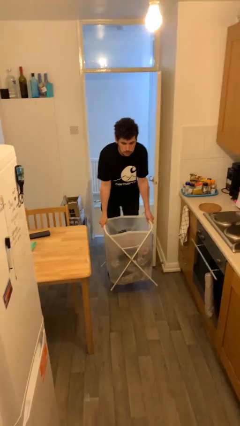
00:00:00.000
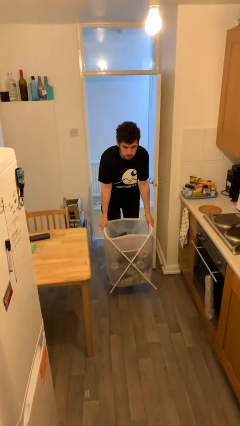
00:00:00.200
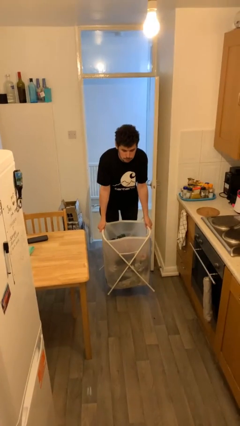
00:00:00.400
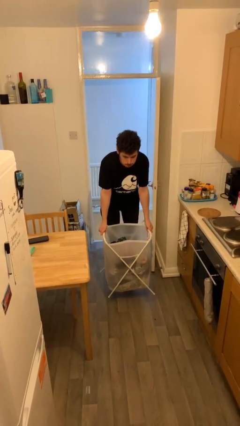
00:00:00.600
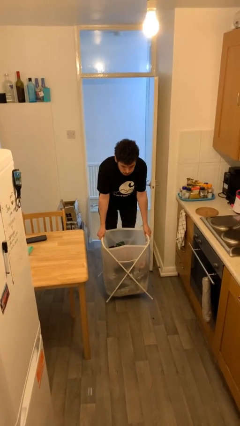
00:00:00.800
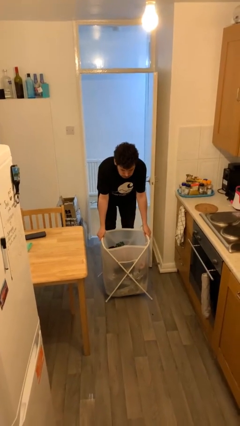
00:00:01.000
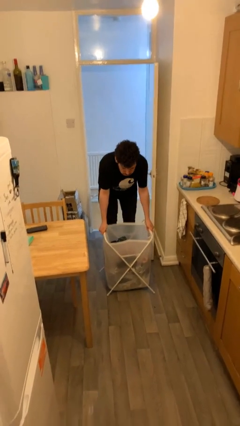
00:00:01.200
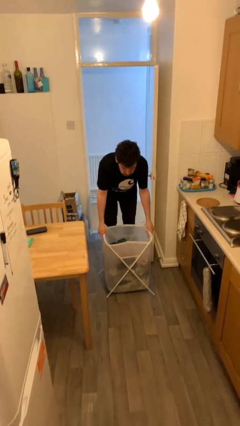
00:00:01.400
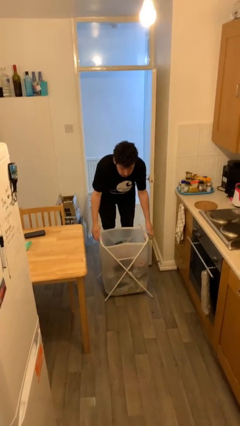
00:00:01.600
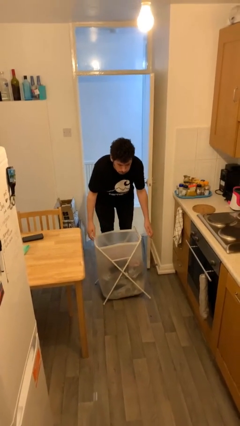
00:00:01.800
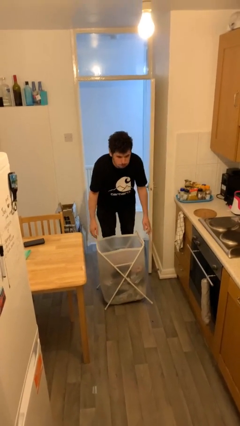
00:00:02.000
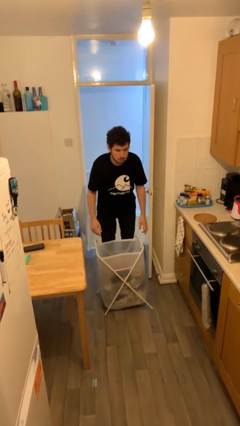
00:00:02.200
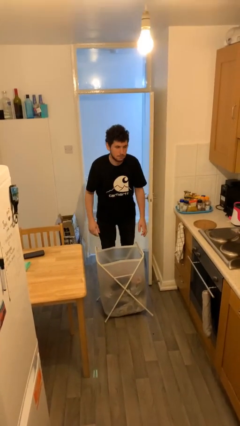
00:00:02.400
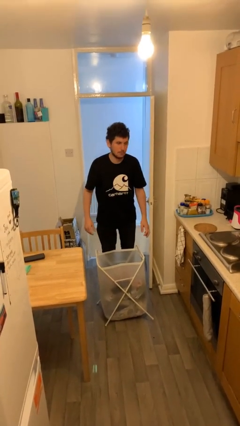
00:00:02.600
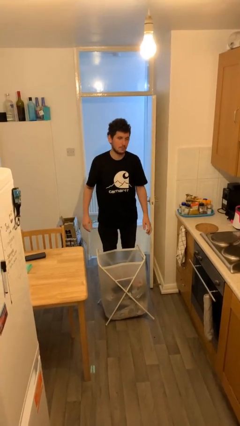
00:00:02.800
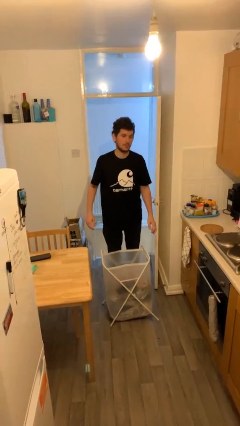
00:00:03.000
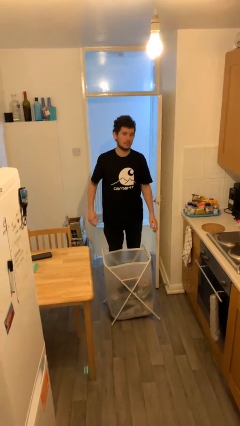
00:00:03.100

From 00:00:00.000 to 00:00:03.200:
person puts down object on floor

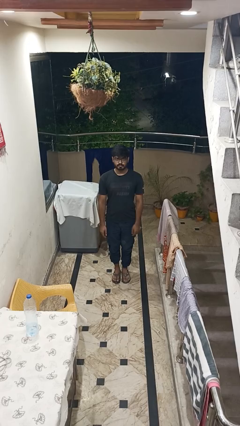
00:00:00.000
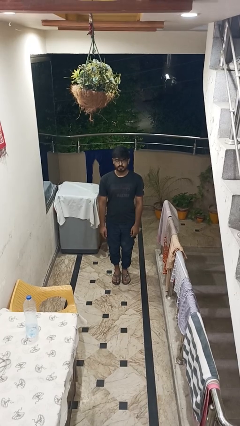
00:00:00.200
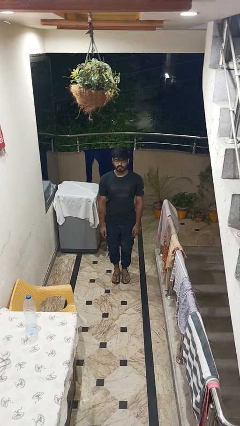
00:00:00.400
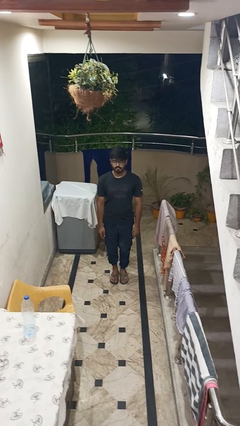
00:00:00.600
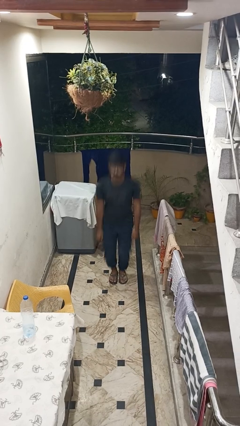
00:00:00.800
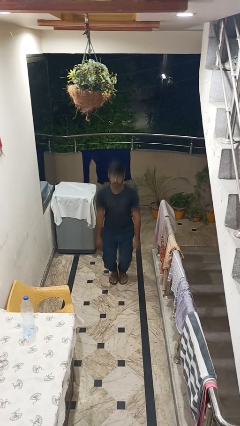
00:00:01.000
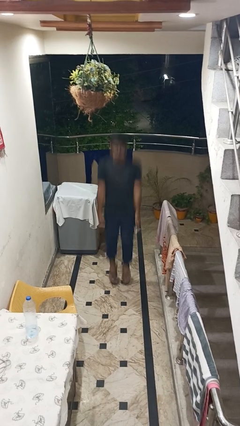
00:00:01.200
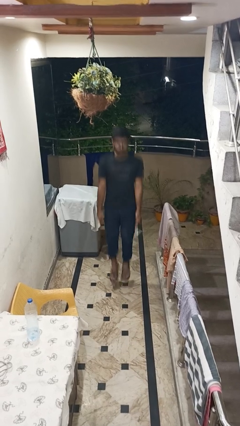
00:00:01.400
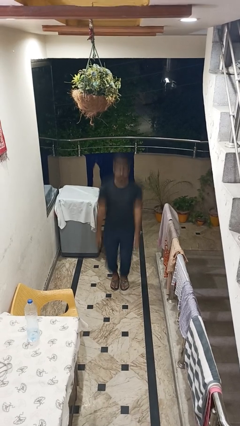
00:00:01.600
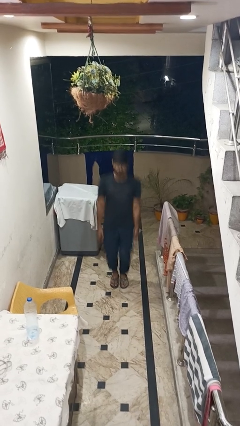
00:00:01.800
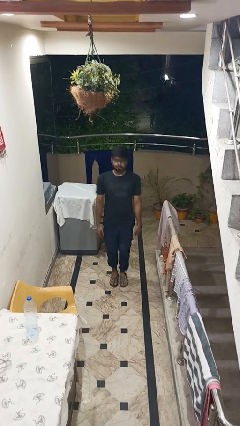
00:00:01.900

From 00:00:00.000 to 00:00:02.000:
person jumps

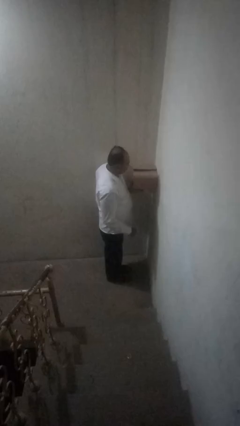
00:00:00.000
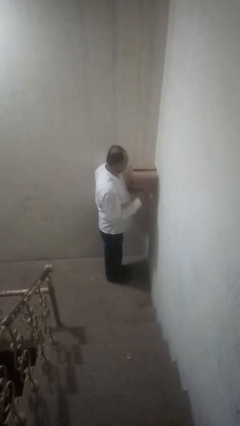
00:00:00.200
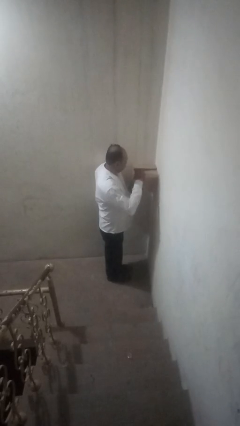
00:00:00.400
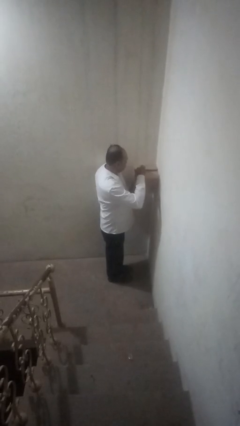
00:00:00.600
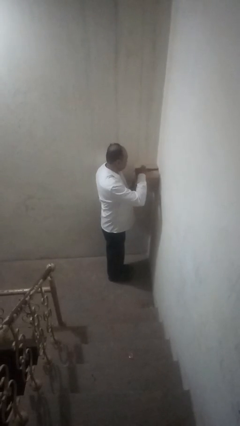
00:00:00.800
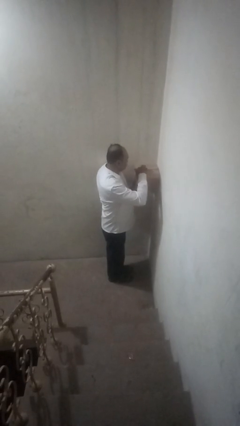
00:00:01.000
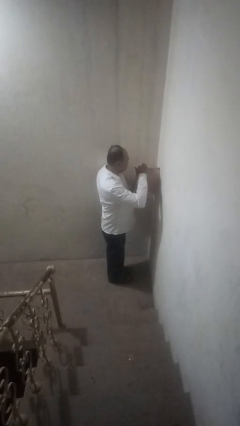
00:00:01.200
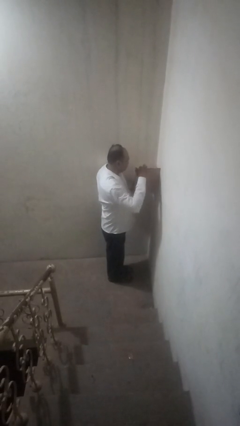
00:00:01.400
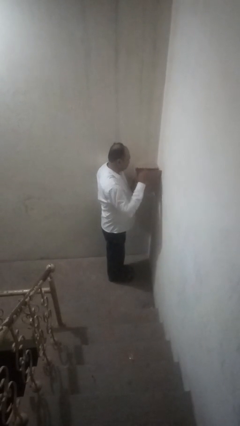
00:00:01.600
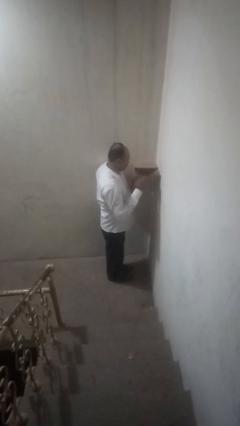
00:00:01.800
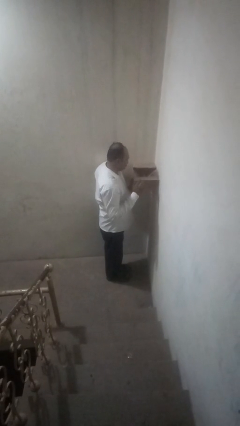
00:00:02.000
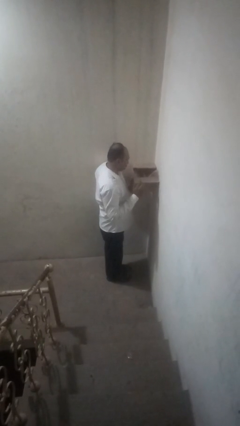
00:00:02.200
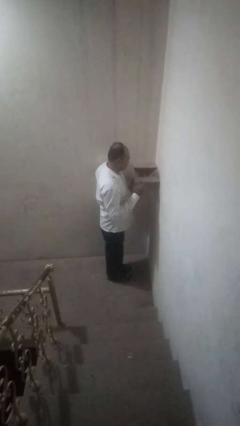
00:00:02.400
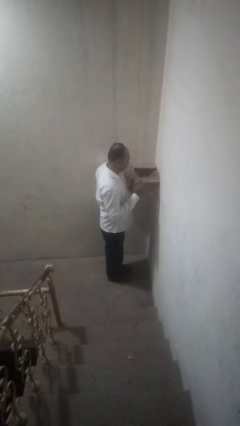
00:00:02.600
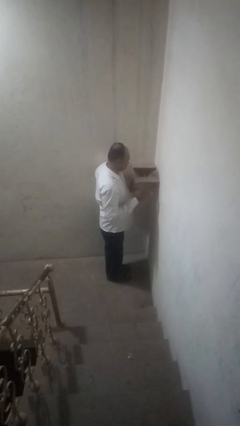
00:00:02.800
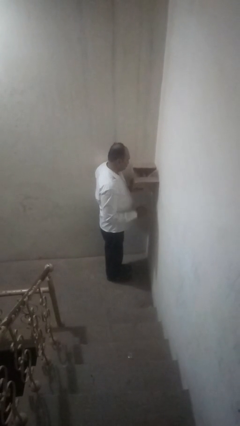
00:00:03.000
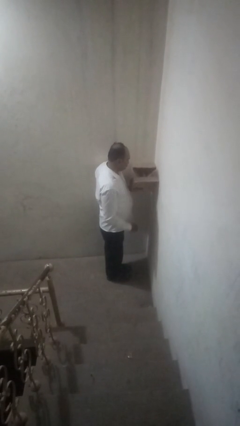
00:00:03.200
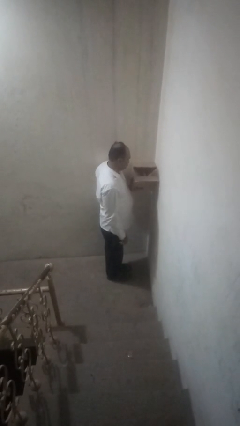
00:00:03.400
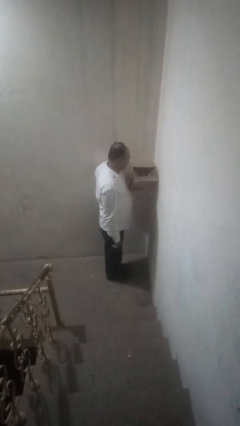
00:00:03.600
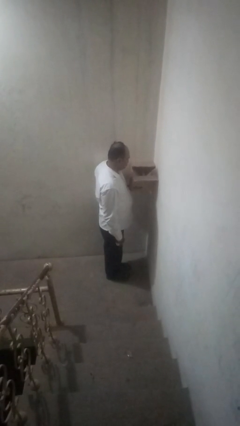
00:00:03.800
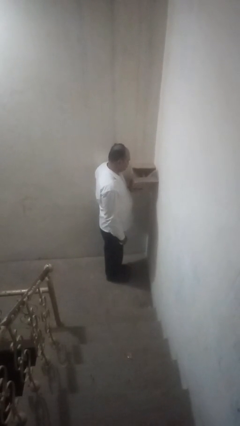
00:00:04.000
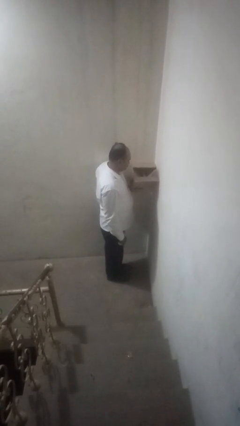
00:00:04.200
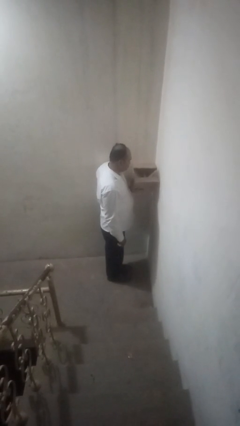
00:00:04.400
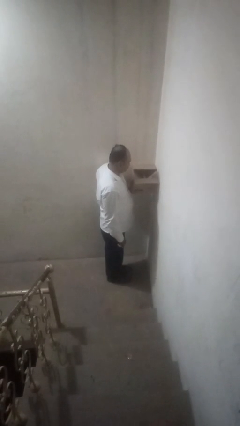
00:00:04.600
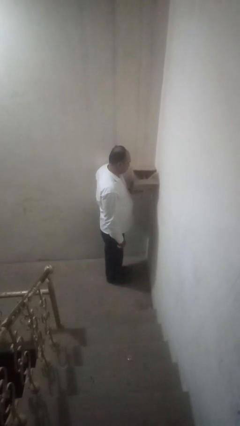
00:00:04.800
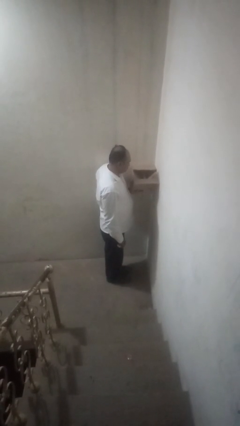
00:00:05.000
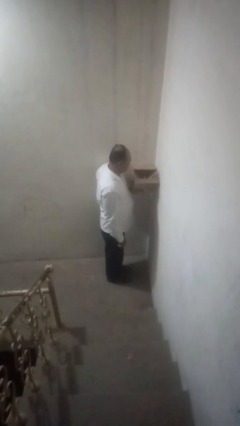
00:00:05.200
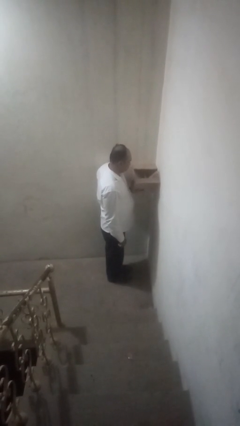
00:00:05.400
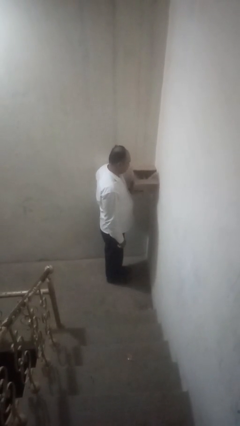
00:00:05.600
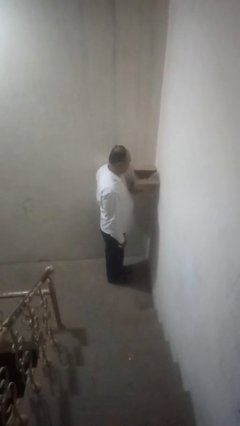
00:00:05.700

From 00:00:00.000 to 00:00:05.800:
person opens mailbox

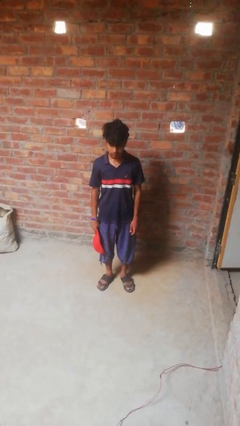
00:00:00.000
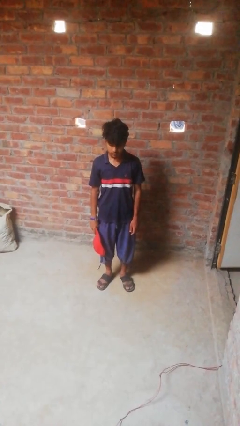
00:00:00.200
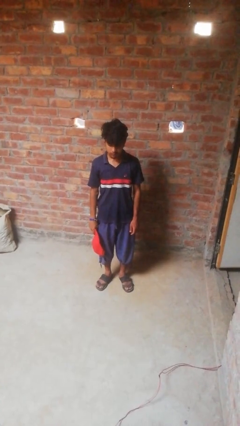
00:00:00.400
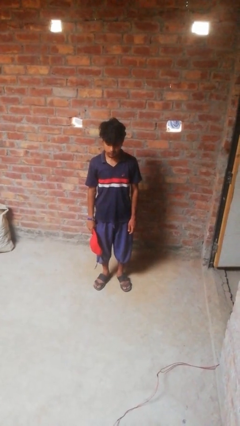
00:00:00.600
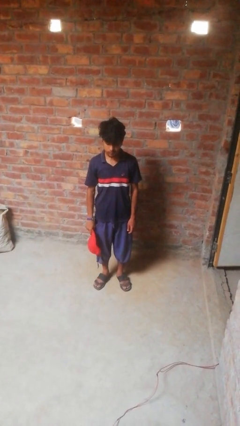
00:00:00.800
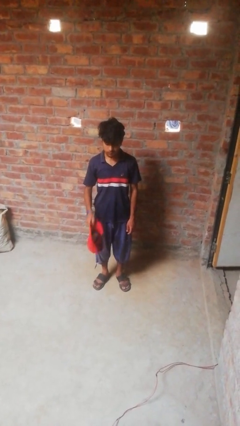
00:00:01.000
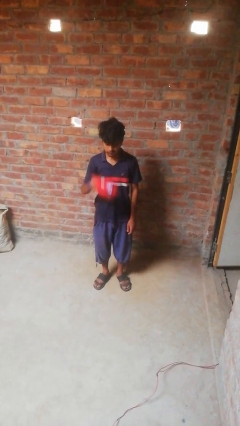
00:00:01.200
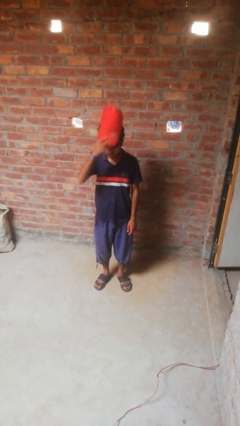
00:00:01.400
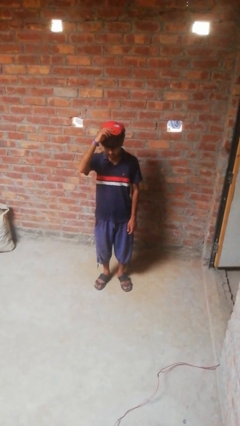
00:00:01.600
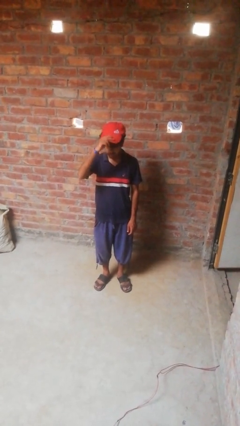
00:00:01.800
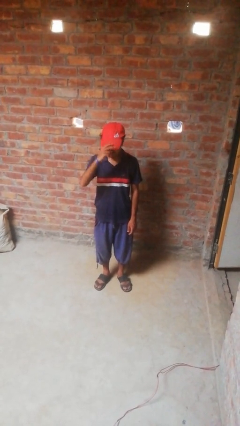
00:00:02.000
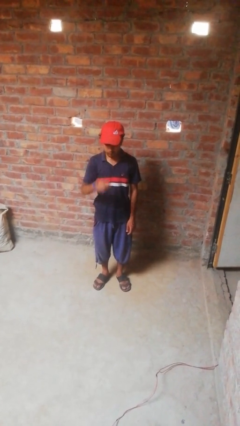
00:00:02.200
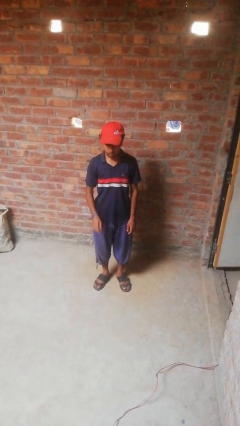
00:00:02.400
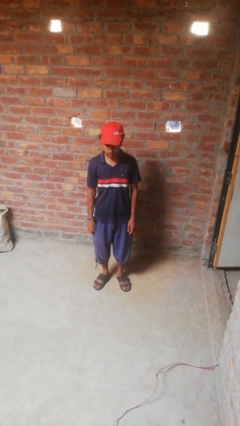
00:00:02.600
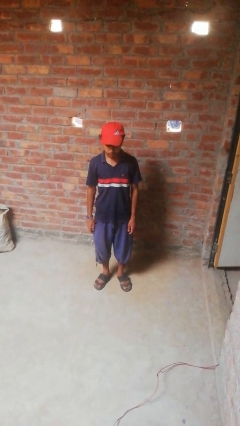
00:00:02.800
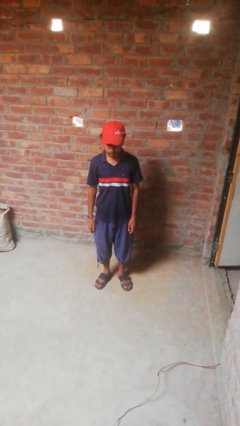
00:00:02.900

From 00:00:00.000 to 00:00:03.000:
person puts on hat

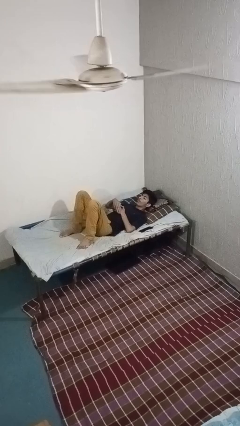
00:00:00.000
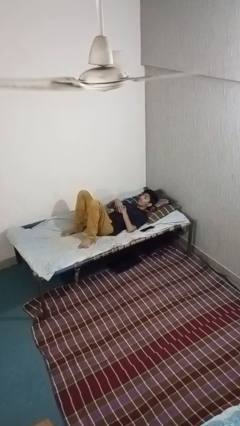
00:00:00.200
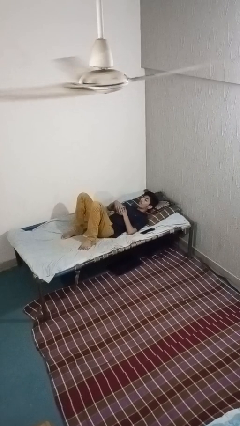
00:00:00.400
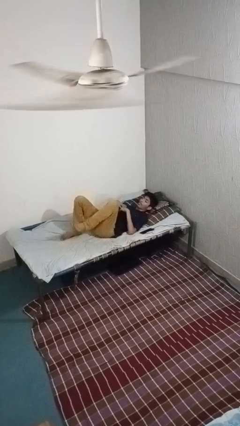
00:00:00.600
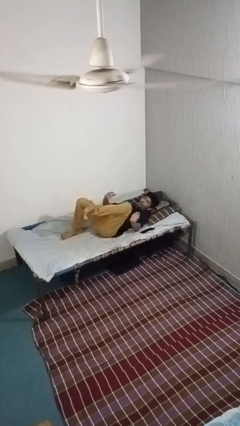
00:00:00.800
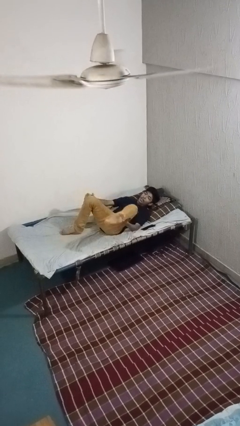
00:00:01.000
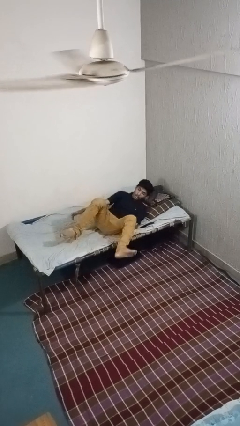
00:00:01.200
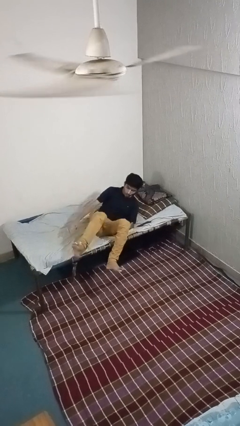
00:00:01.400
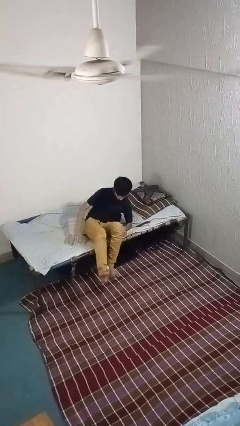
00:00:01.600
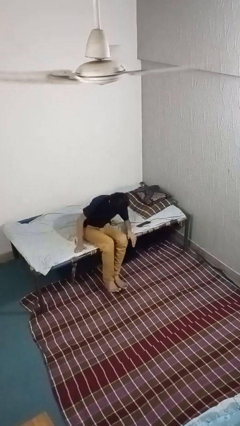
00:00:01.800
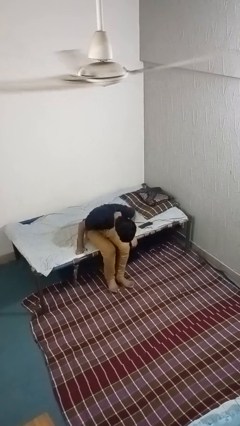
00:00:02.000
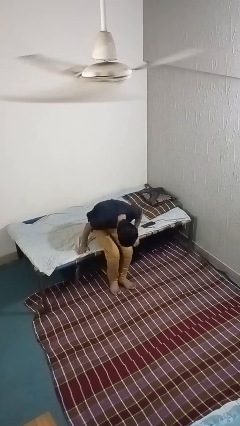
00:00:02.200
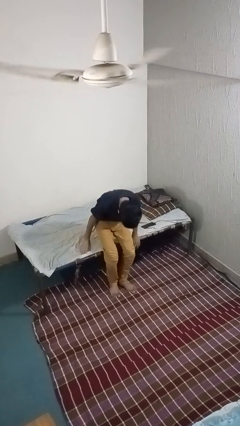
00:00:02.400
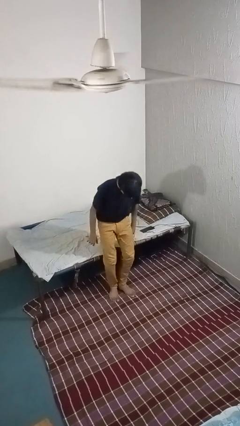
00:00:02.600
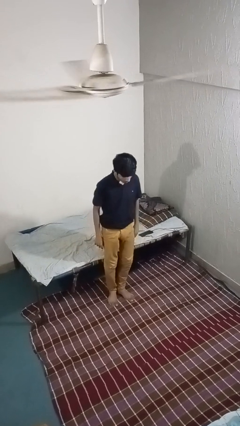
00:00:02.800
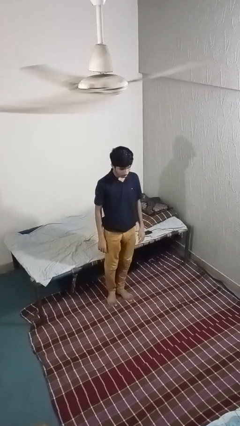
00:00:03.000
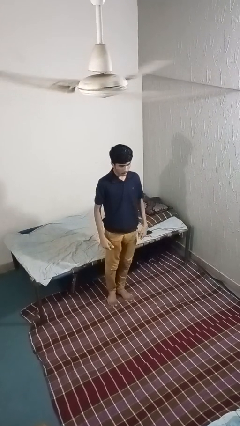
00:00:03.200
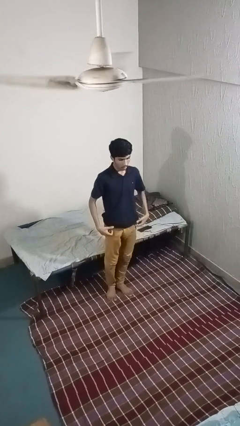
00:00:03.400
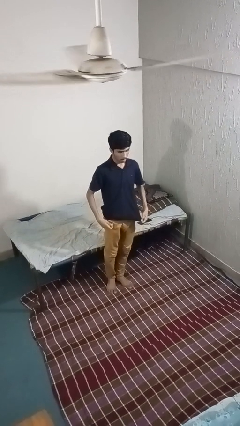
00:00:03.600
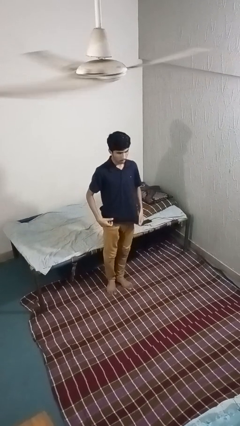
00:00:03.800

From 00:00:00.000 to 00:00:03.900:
person stands up
